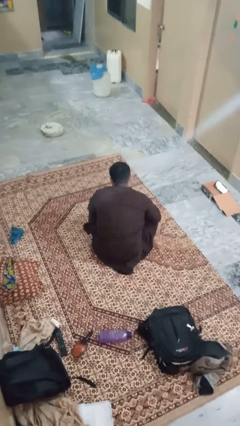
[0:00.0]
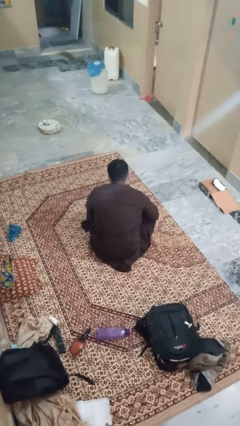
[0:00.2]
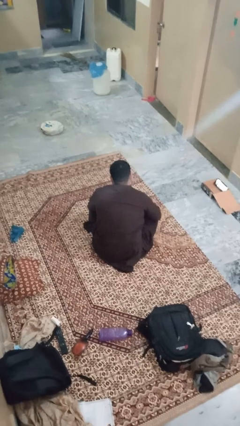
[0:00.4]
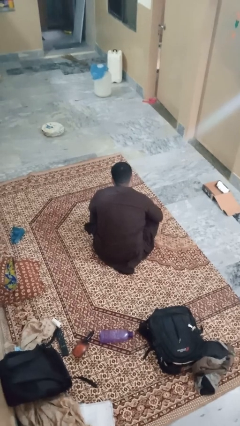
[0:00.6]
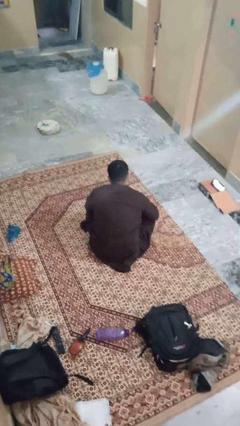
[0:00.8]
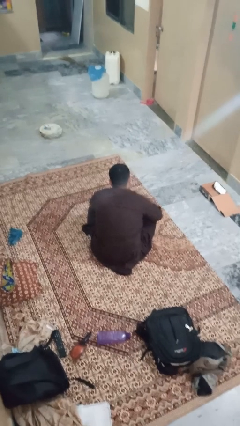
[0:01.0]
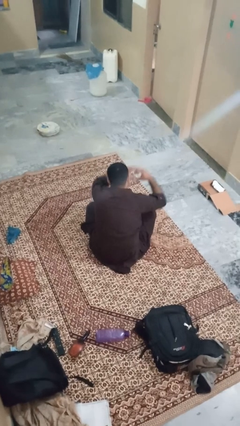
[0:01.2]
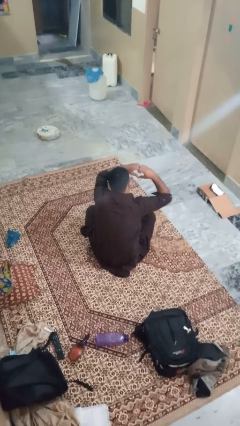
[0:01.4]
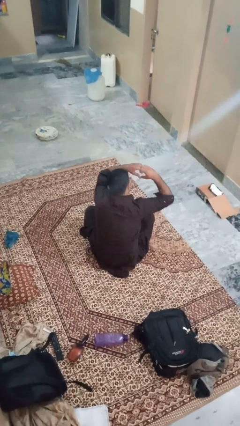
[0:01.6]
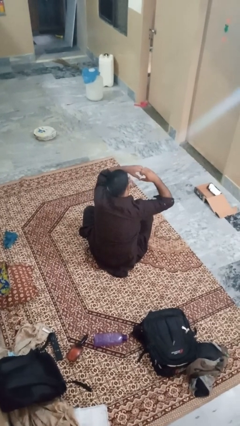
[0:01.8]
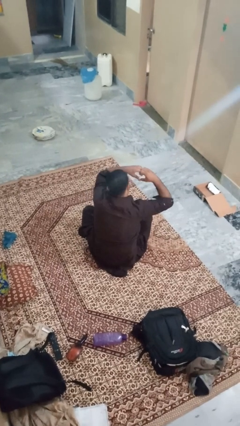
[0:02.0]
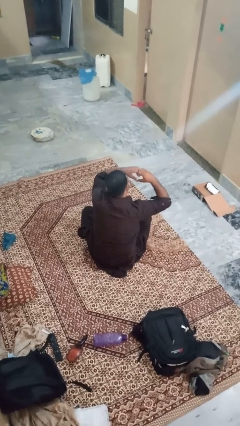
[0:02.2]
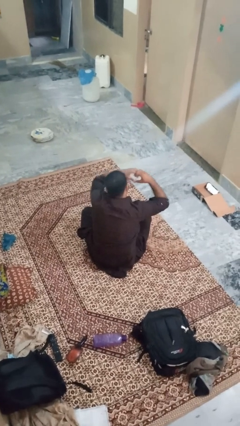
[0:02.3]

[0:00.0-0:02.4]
person gestures heart

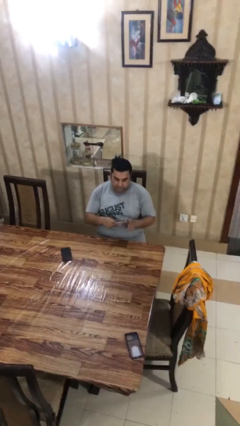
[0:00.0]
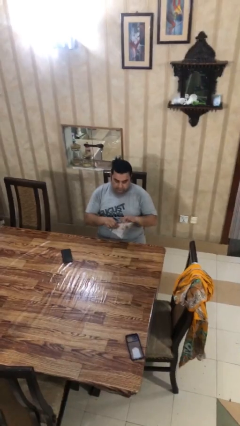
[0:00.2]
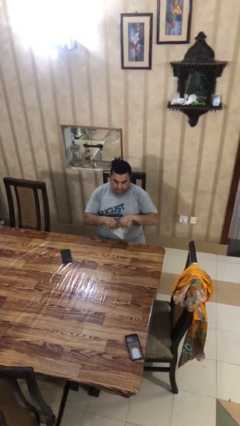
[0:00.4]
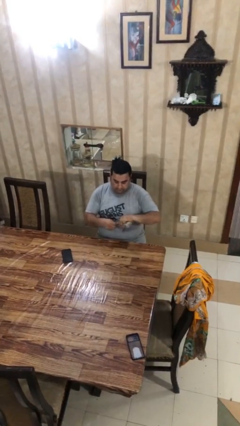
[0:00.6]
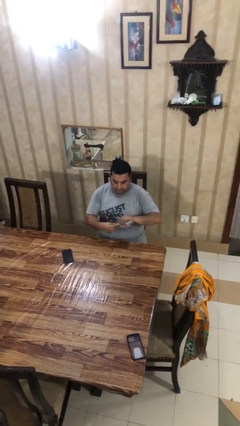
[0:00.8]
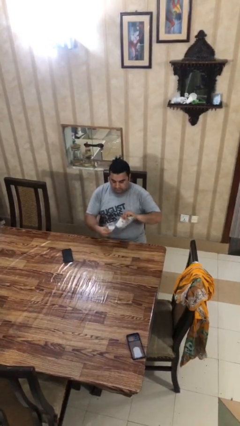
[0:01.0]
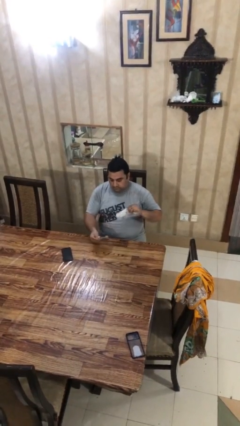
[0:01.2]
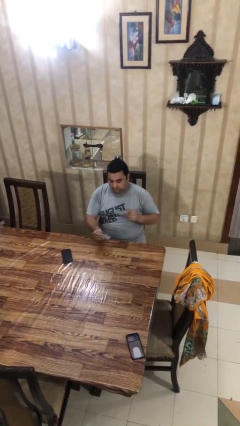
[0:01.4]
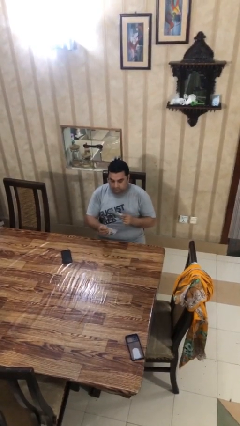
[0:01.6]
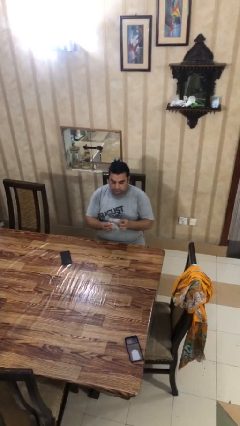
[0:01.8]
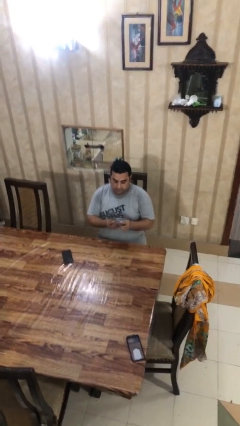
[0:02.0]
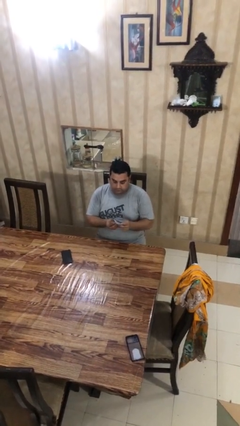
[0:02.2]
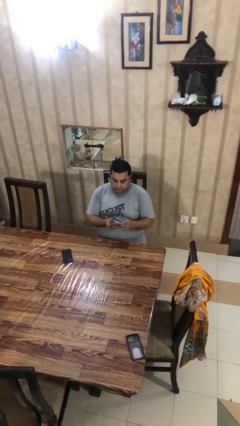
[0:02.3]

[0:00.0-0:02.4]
person tears paper

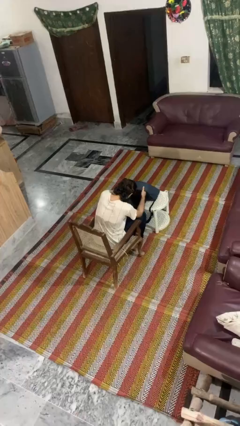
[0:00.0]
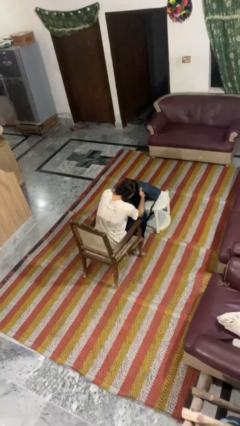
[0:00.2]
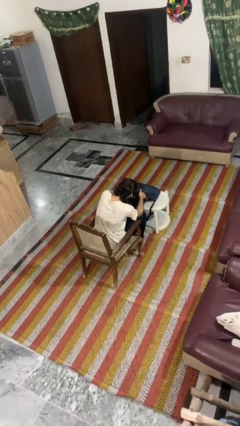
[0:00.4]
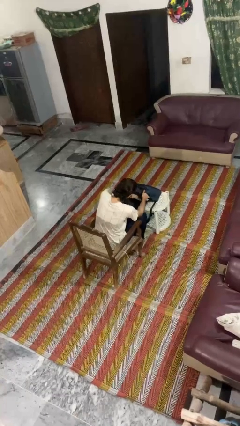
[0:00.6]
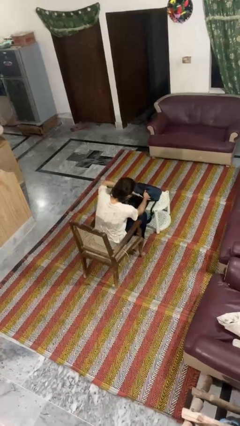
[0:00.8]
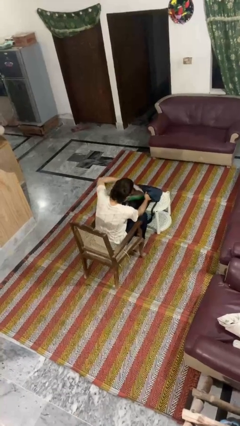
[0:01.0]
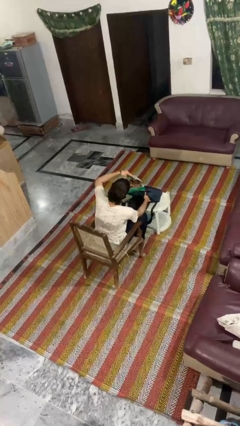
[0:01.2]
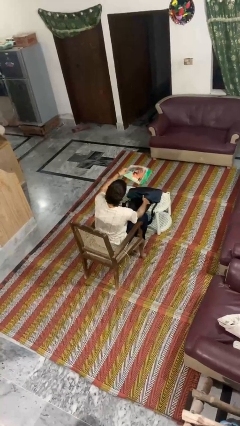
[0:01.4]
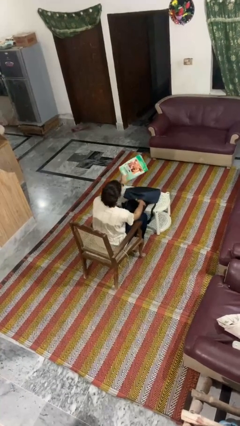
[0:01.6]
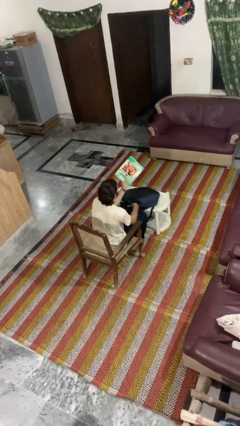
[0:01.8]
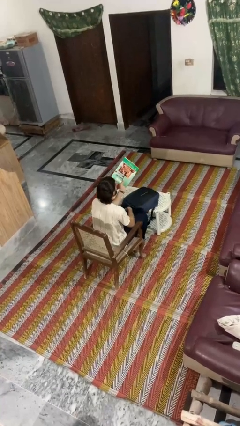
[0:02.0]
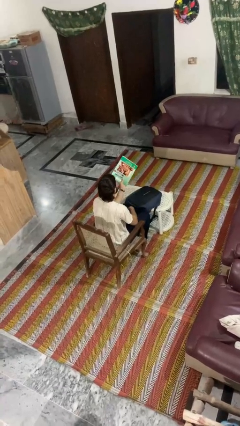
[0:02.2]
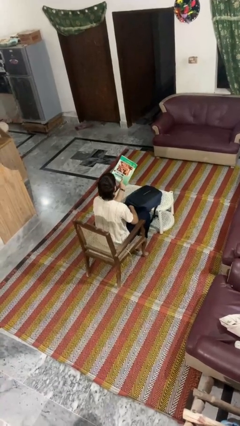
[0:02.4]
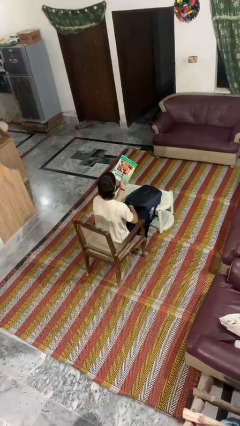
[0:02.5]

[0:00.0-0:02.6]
person takes object from backpack

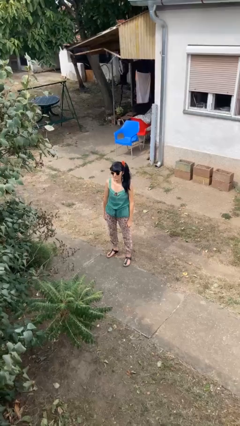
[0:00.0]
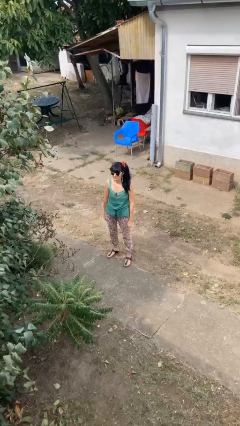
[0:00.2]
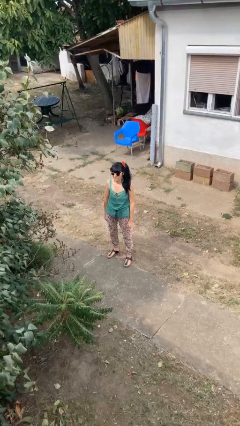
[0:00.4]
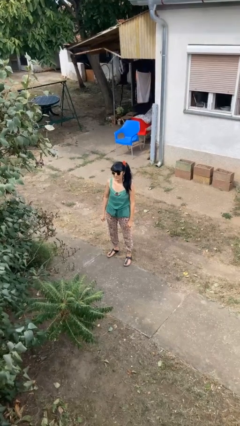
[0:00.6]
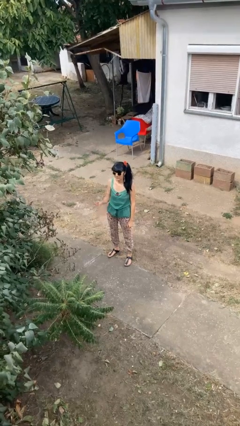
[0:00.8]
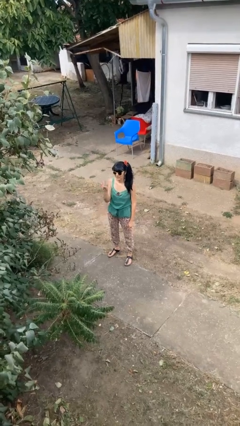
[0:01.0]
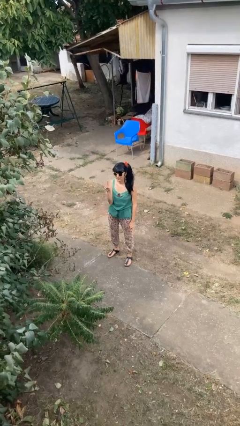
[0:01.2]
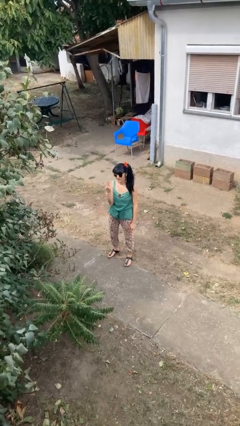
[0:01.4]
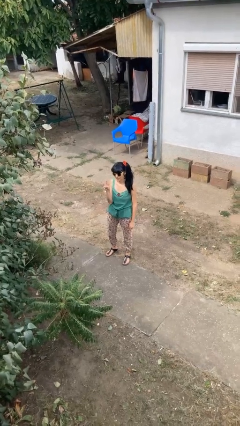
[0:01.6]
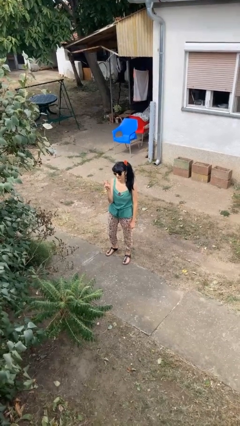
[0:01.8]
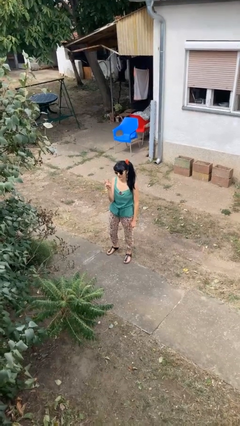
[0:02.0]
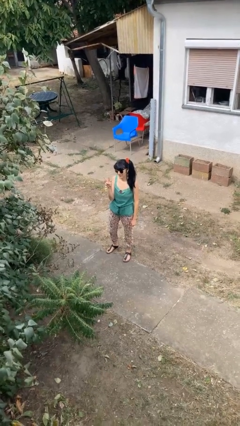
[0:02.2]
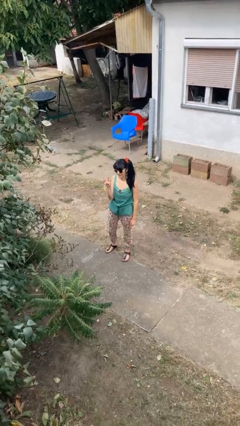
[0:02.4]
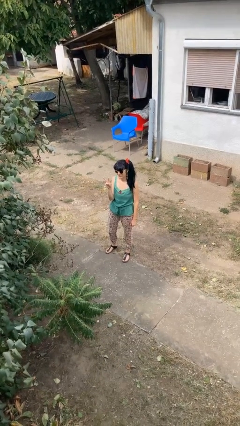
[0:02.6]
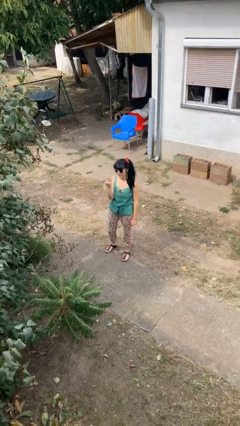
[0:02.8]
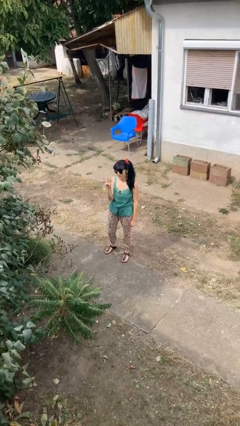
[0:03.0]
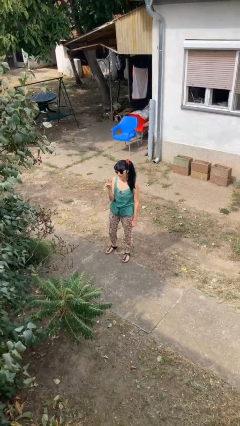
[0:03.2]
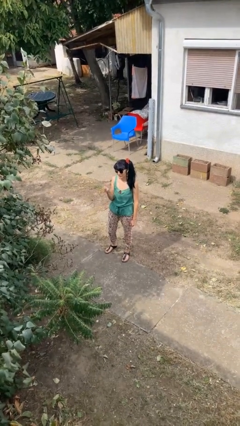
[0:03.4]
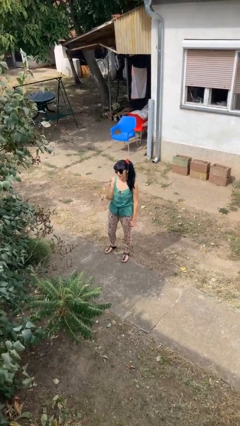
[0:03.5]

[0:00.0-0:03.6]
person gestures peace

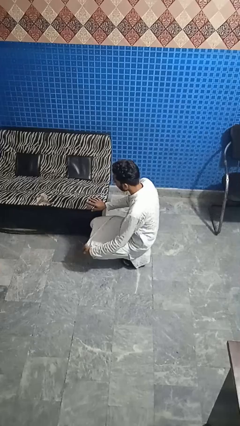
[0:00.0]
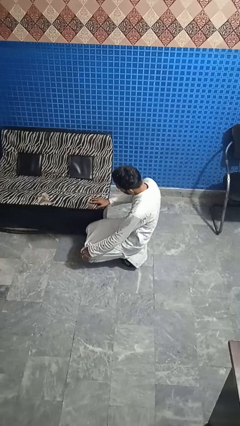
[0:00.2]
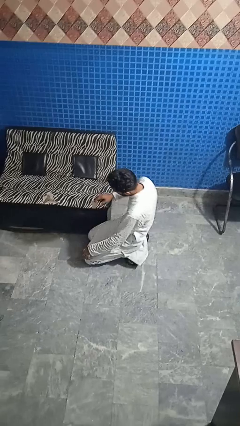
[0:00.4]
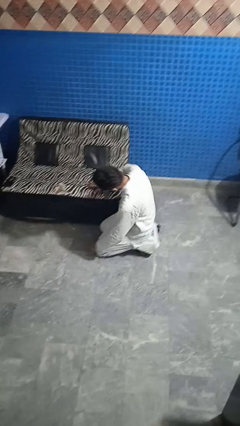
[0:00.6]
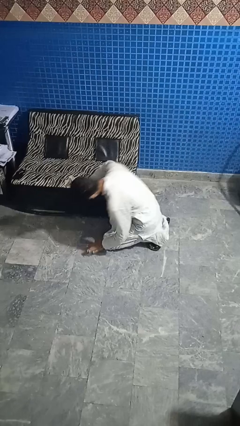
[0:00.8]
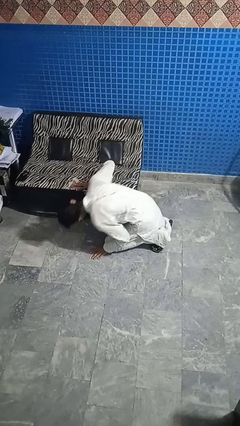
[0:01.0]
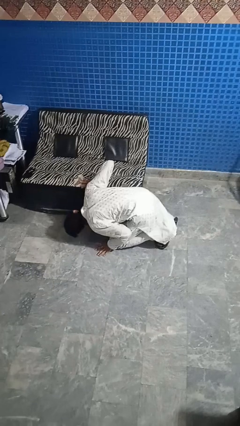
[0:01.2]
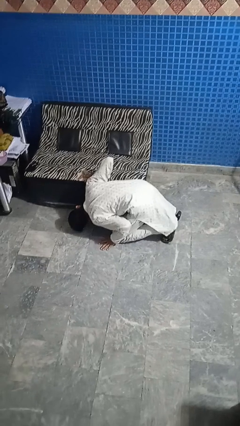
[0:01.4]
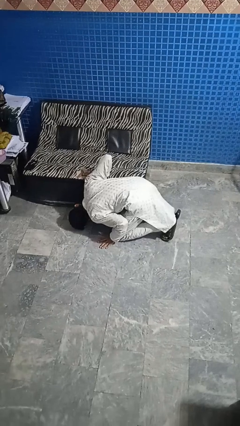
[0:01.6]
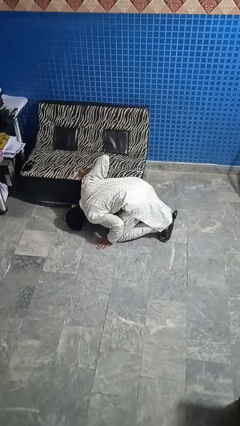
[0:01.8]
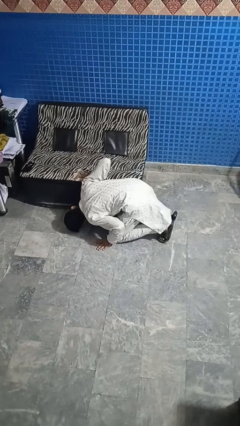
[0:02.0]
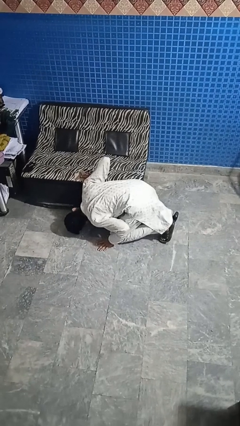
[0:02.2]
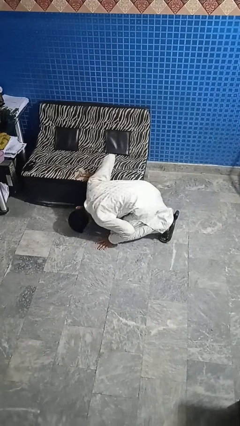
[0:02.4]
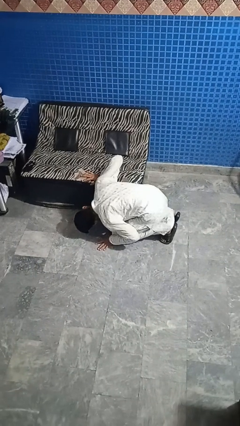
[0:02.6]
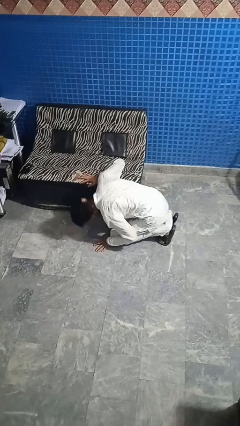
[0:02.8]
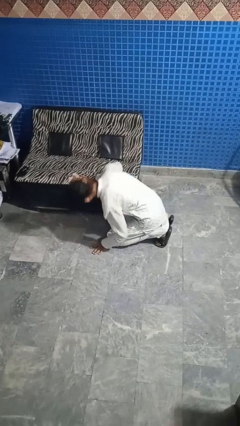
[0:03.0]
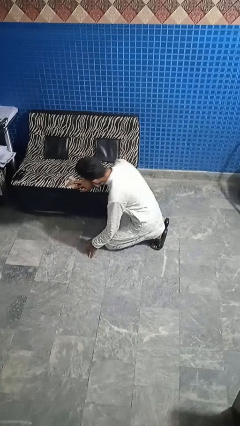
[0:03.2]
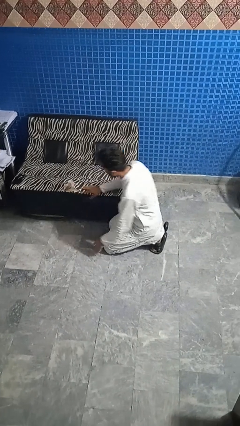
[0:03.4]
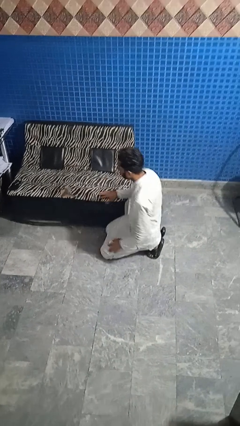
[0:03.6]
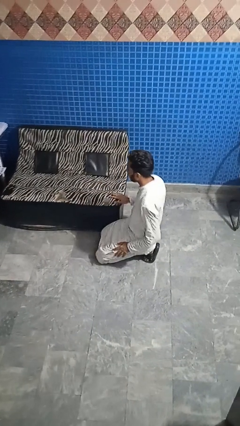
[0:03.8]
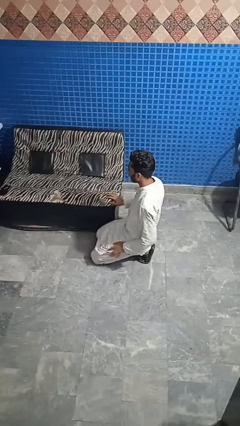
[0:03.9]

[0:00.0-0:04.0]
person searches under couch

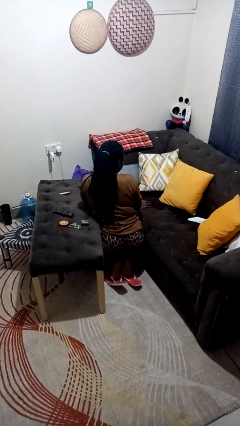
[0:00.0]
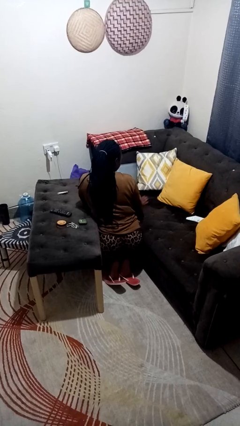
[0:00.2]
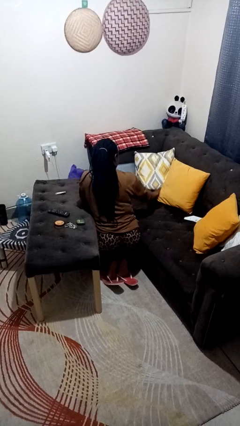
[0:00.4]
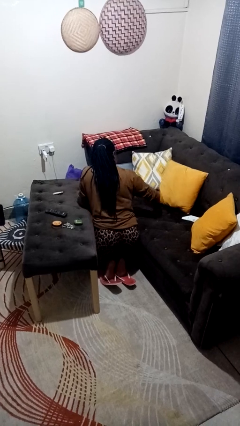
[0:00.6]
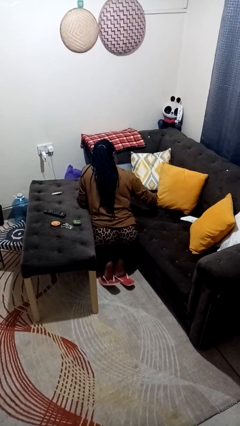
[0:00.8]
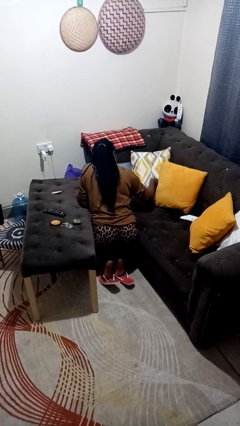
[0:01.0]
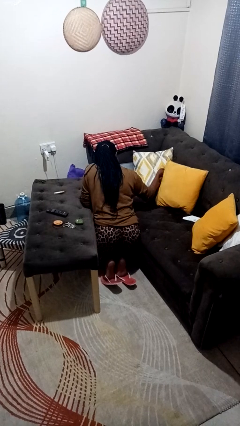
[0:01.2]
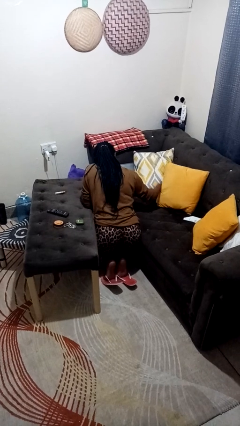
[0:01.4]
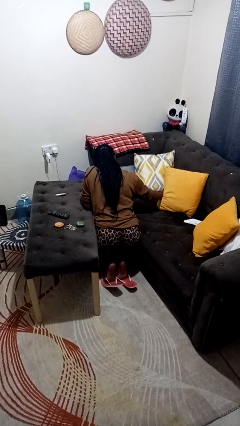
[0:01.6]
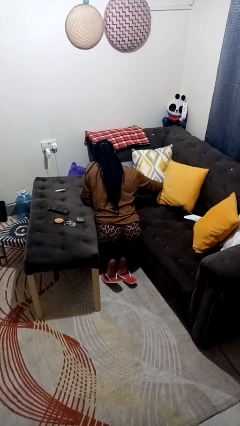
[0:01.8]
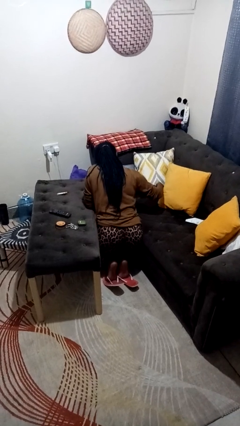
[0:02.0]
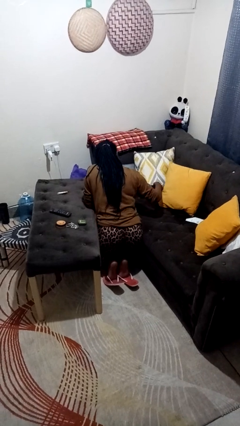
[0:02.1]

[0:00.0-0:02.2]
person searches in couch

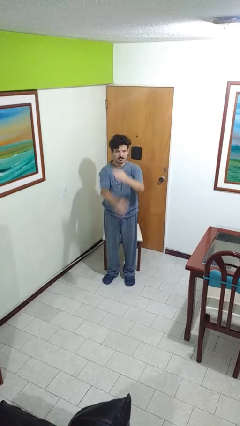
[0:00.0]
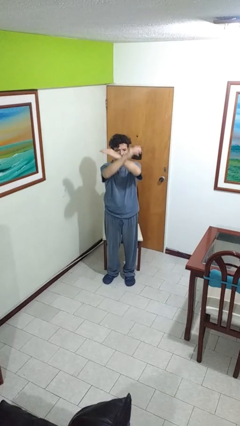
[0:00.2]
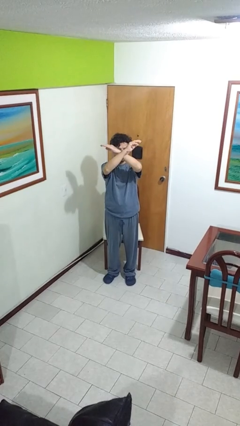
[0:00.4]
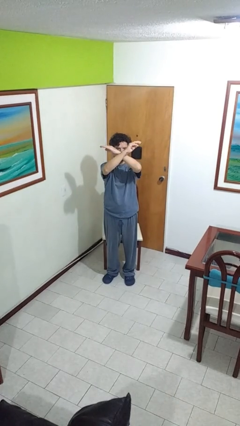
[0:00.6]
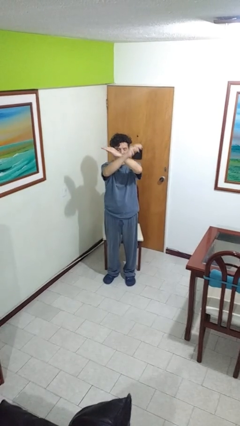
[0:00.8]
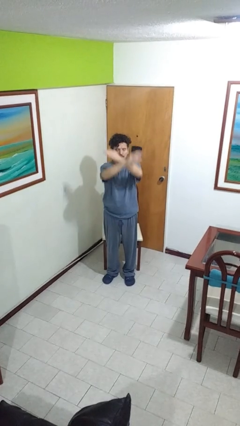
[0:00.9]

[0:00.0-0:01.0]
person gestures arms x
